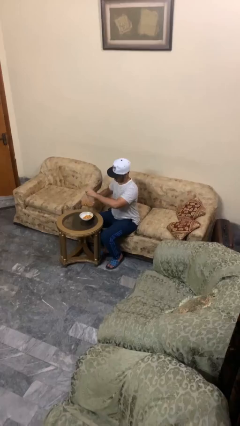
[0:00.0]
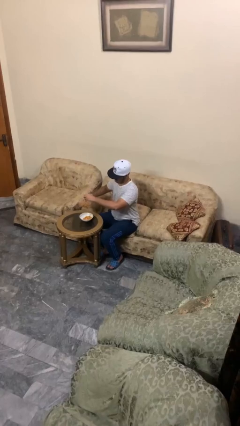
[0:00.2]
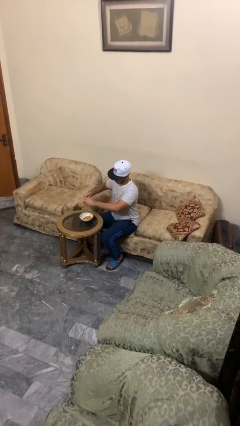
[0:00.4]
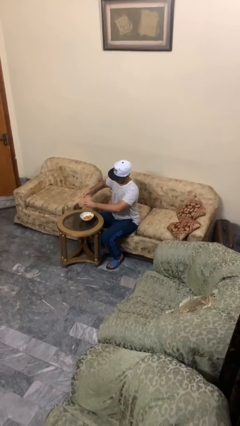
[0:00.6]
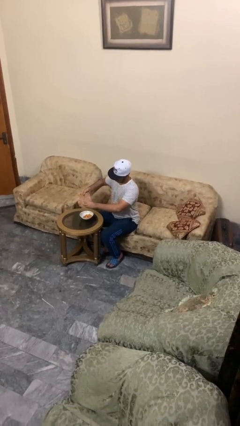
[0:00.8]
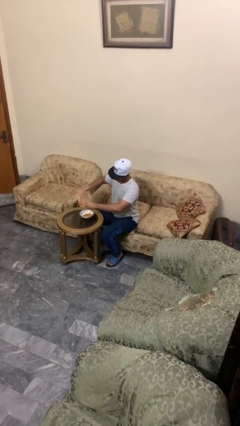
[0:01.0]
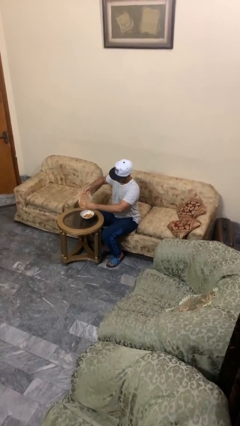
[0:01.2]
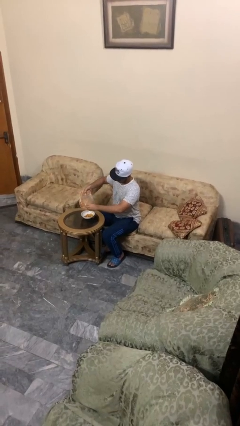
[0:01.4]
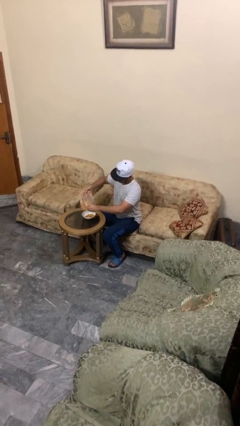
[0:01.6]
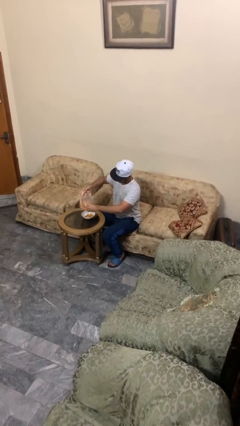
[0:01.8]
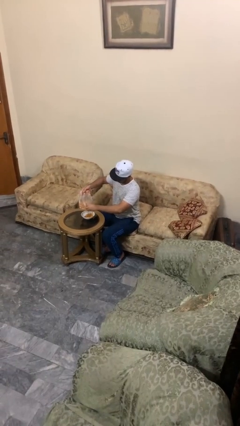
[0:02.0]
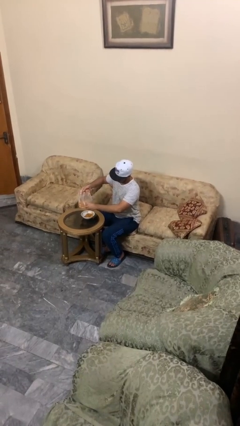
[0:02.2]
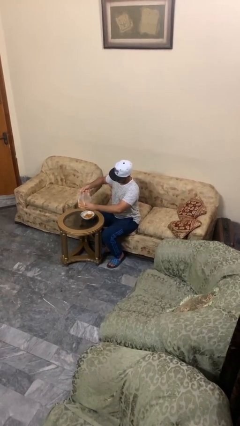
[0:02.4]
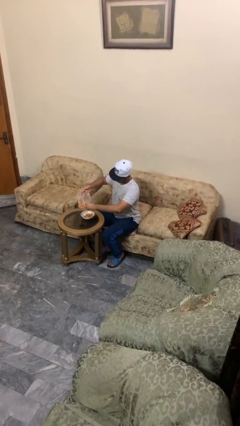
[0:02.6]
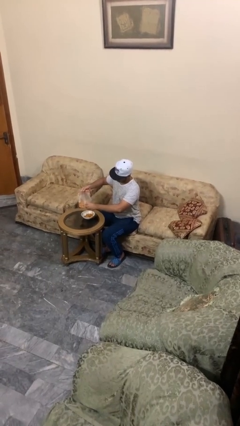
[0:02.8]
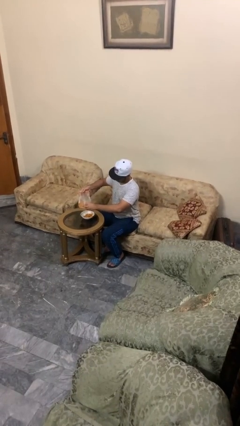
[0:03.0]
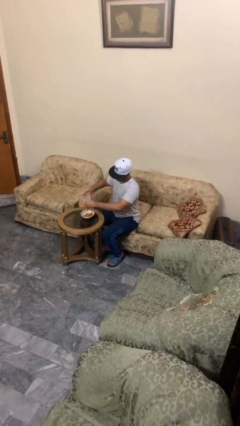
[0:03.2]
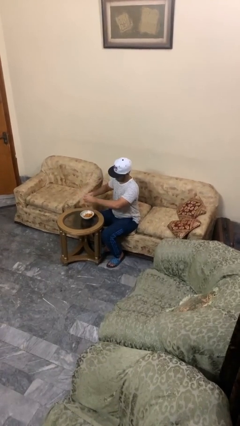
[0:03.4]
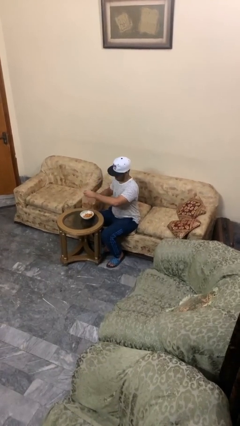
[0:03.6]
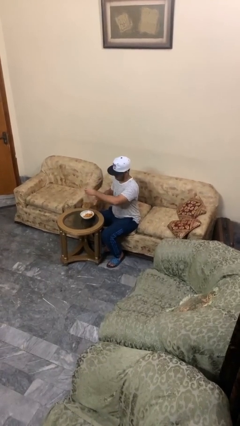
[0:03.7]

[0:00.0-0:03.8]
person pours into bowl

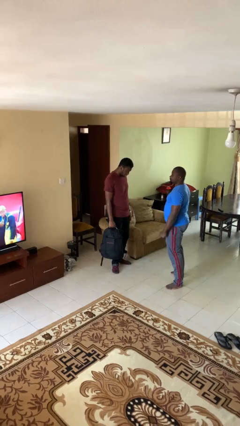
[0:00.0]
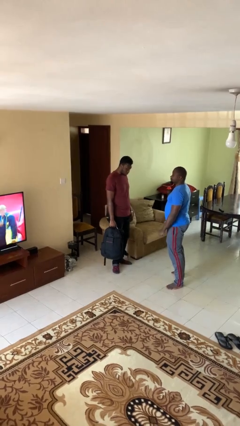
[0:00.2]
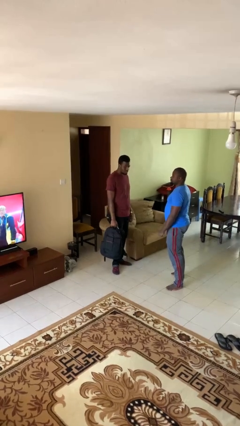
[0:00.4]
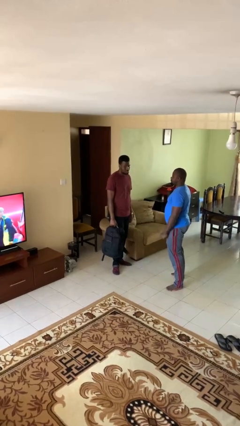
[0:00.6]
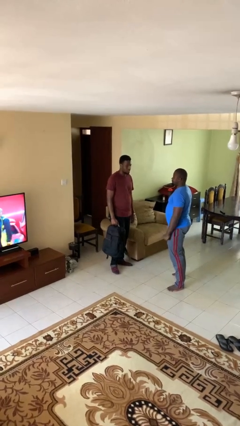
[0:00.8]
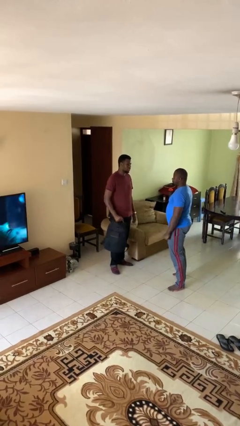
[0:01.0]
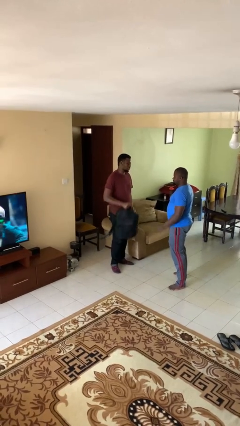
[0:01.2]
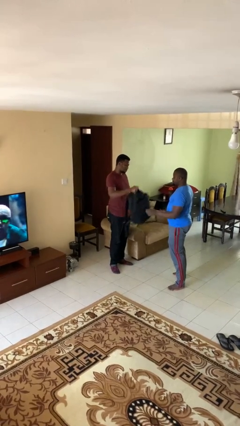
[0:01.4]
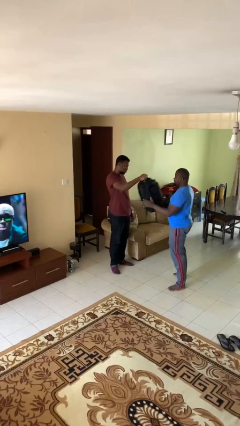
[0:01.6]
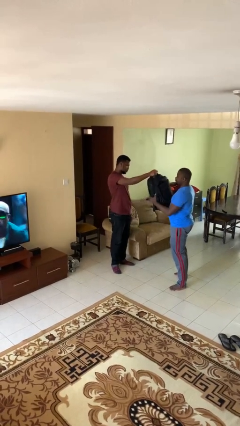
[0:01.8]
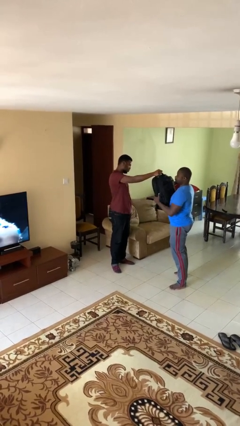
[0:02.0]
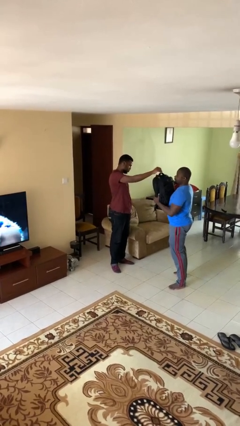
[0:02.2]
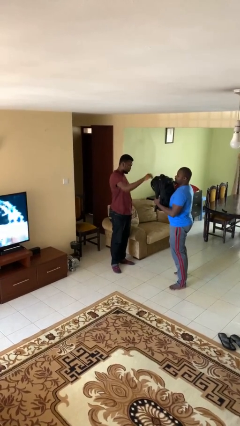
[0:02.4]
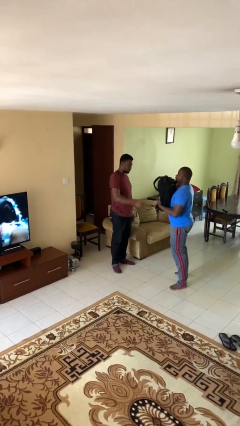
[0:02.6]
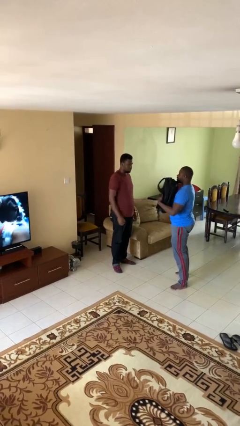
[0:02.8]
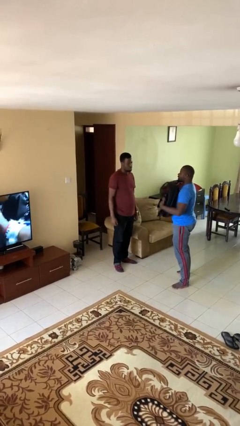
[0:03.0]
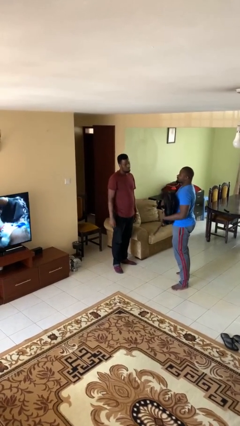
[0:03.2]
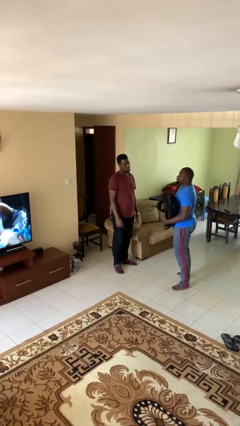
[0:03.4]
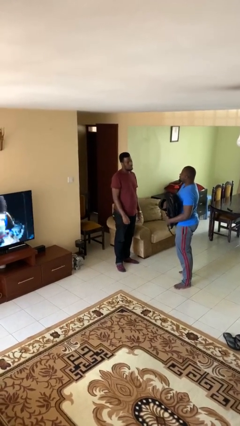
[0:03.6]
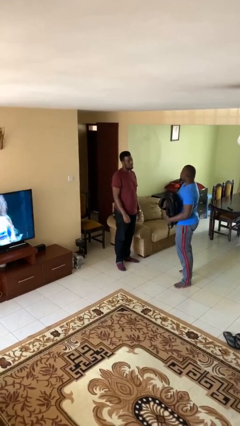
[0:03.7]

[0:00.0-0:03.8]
person transfers object to person

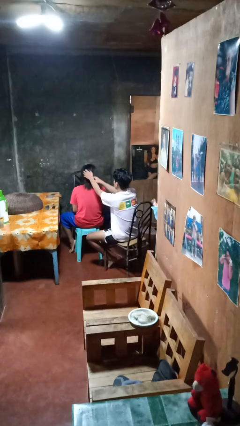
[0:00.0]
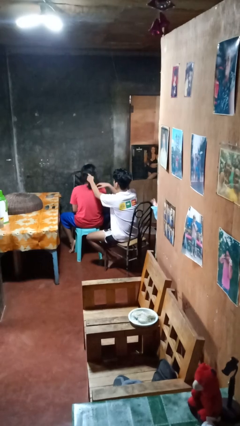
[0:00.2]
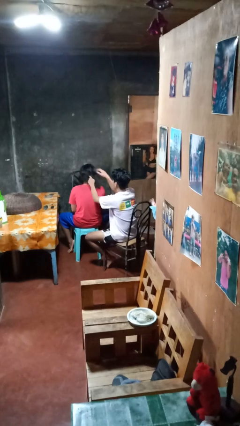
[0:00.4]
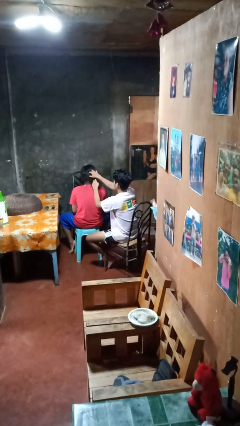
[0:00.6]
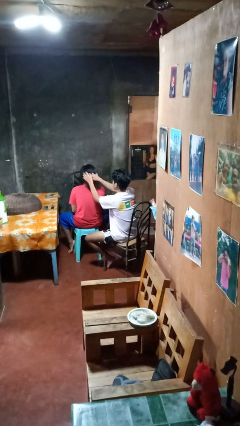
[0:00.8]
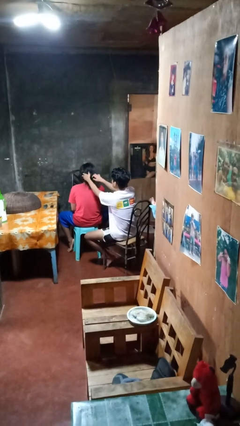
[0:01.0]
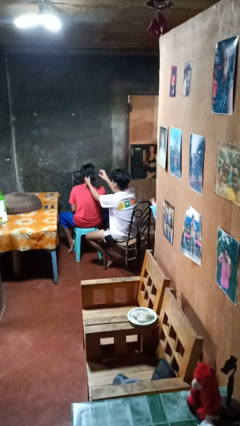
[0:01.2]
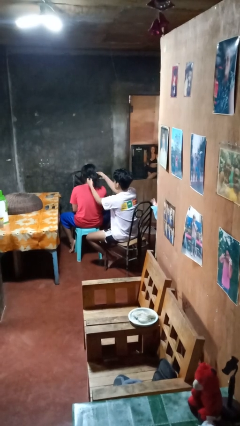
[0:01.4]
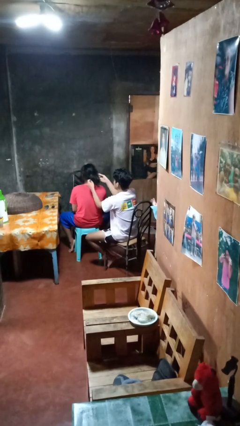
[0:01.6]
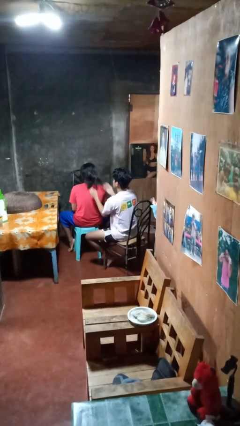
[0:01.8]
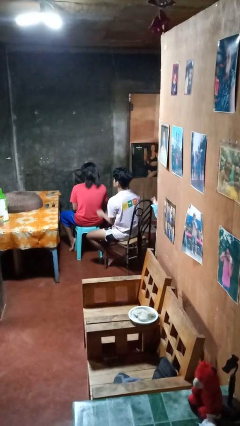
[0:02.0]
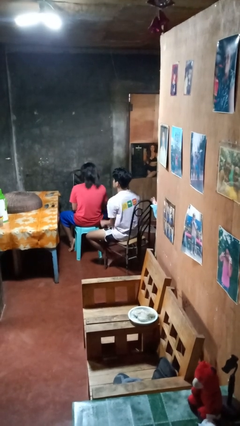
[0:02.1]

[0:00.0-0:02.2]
person braids hair of person

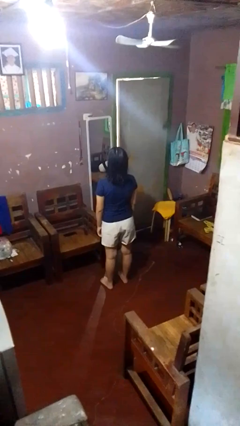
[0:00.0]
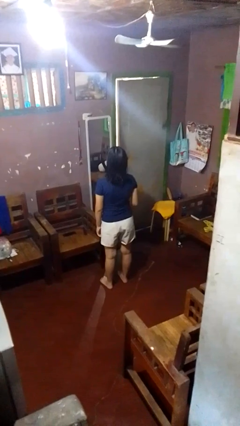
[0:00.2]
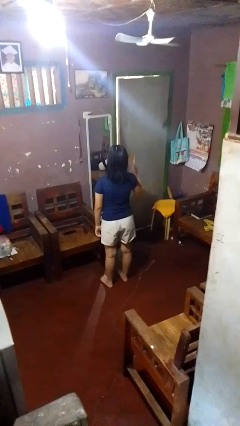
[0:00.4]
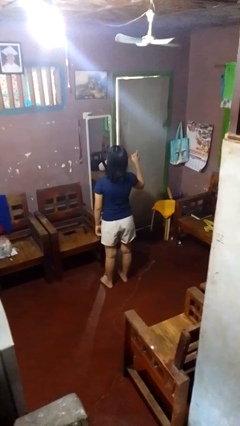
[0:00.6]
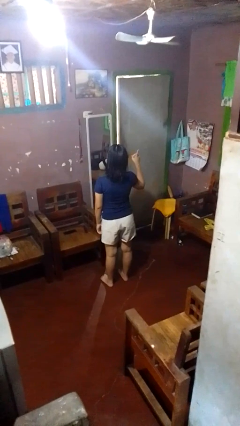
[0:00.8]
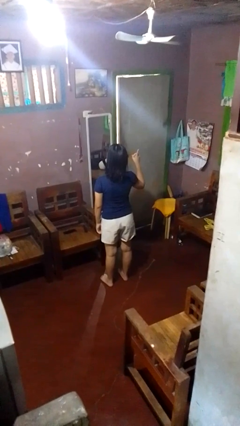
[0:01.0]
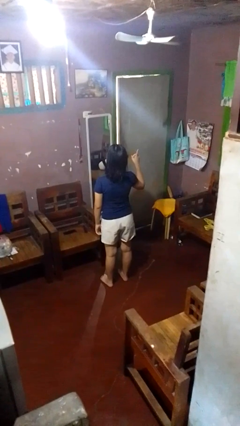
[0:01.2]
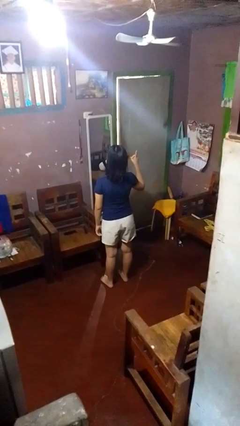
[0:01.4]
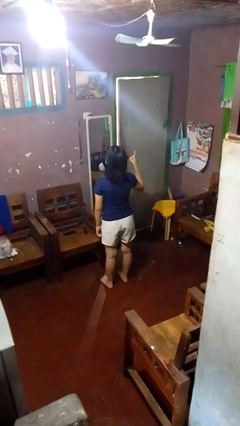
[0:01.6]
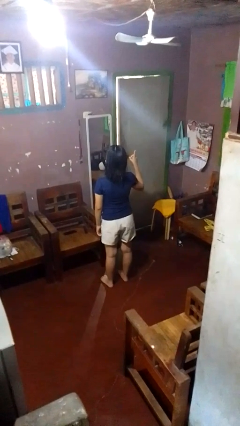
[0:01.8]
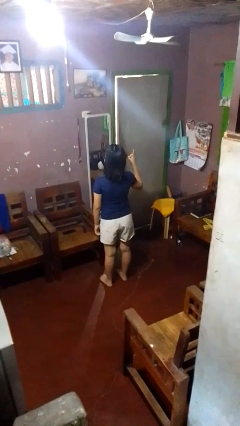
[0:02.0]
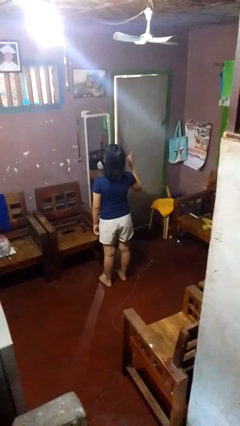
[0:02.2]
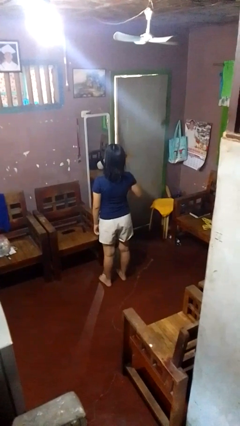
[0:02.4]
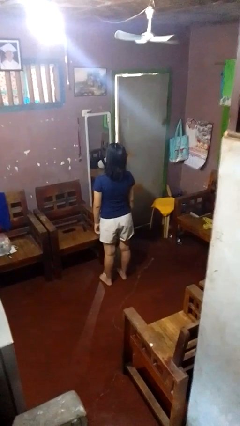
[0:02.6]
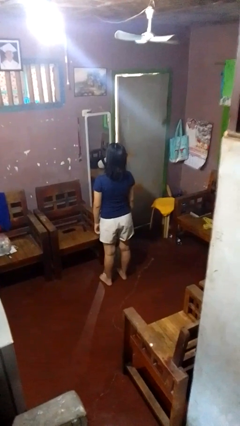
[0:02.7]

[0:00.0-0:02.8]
person gestures number one

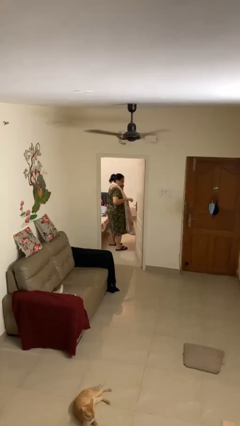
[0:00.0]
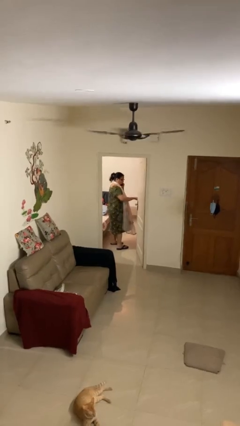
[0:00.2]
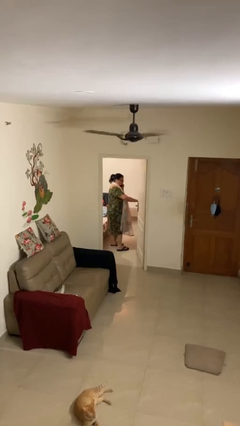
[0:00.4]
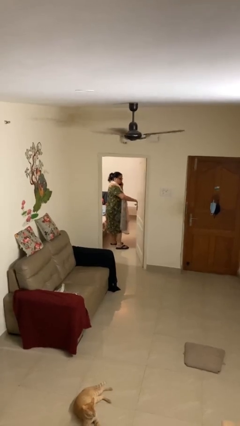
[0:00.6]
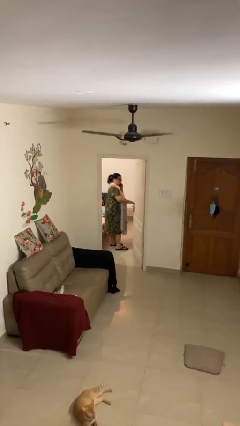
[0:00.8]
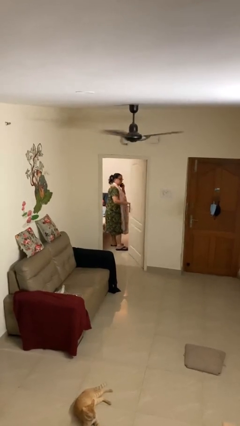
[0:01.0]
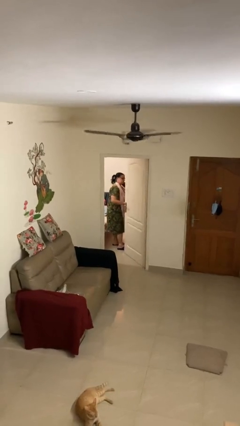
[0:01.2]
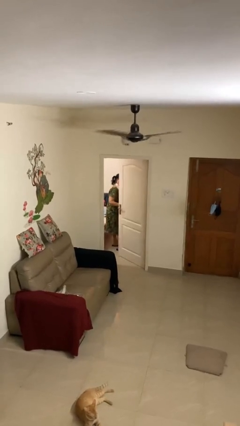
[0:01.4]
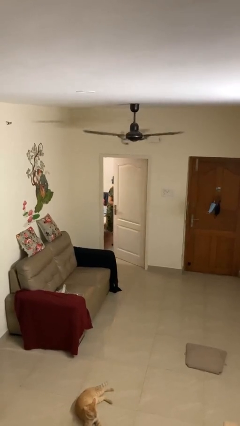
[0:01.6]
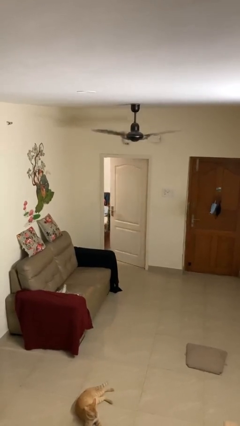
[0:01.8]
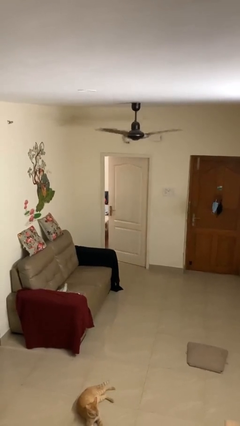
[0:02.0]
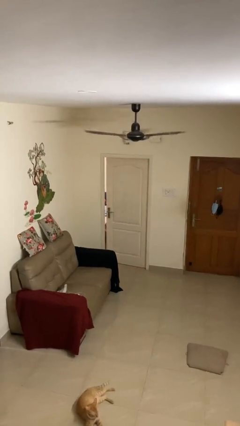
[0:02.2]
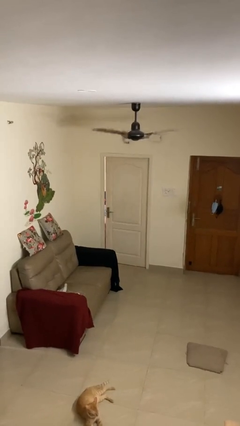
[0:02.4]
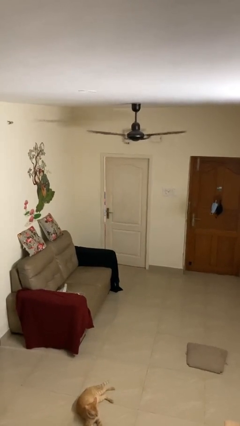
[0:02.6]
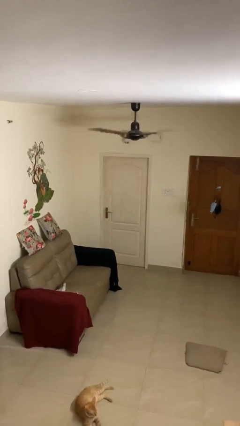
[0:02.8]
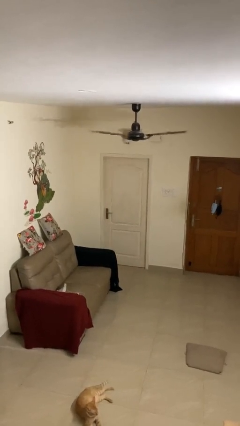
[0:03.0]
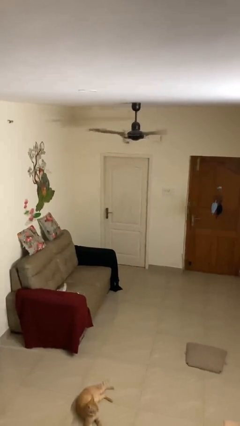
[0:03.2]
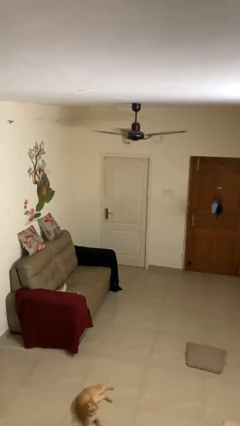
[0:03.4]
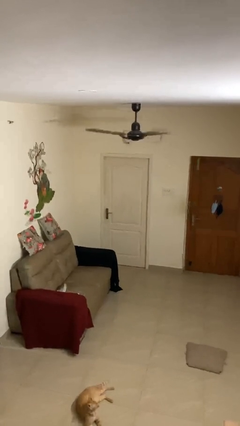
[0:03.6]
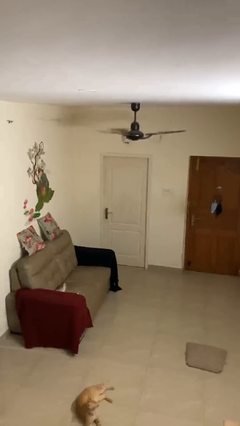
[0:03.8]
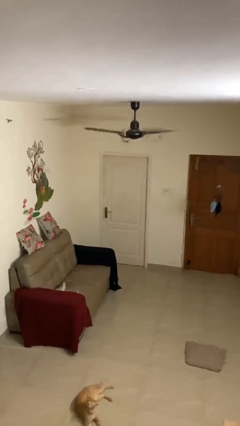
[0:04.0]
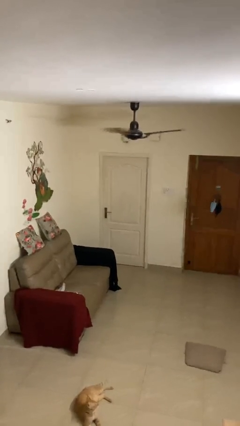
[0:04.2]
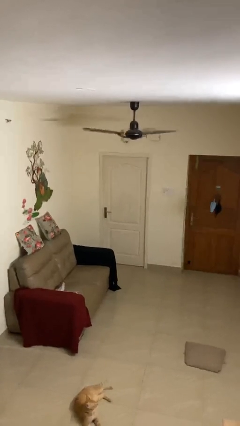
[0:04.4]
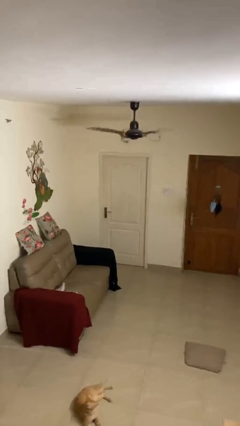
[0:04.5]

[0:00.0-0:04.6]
person closes facility door

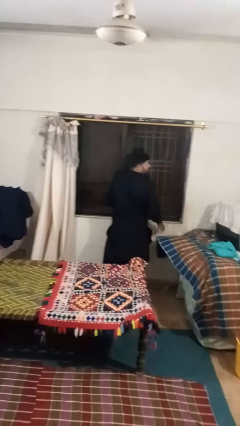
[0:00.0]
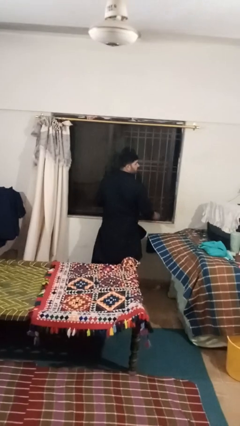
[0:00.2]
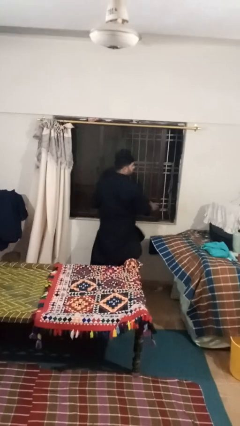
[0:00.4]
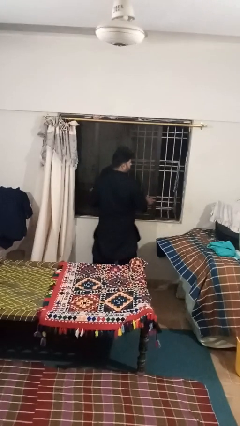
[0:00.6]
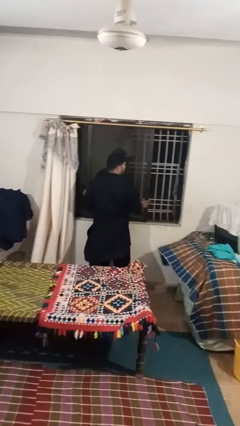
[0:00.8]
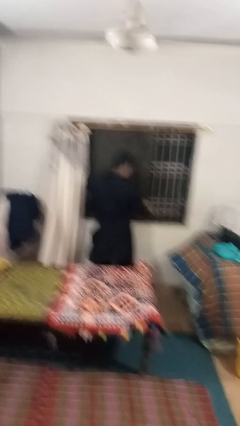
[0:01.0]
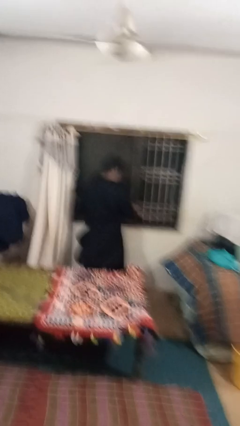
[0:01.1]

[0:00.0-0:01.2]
person opens sliding door
